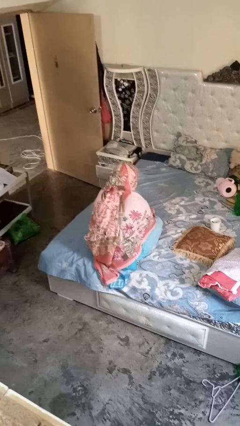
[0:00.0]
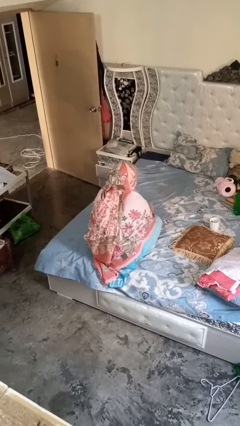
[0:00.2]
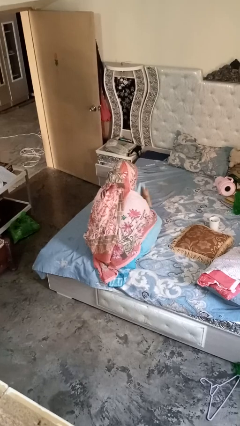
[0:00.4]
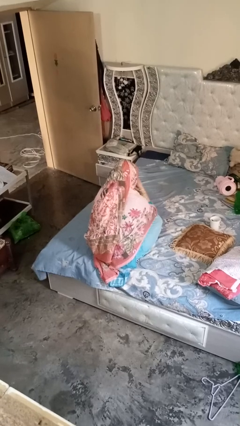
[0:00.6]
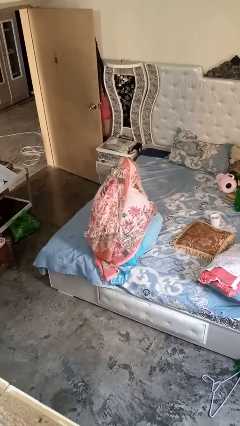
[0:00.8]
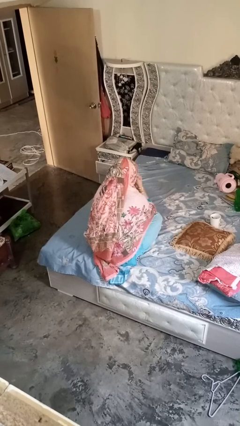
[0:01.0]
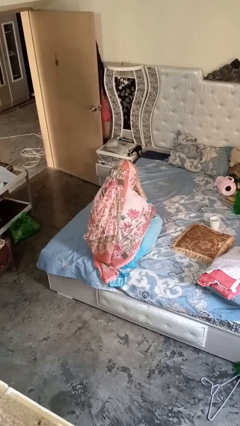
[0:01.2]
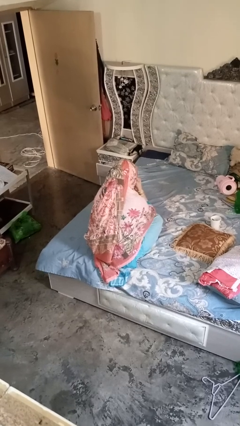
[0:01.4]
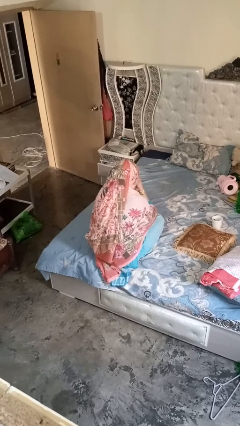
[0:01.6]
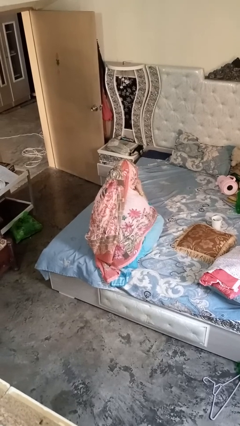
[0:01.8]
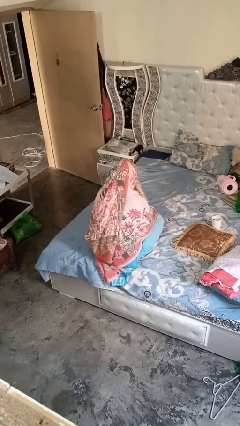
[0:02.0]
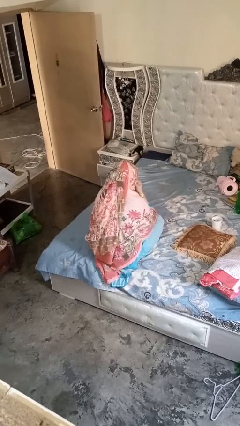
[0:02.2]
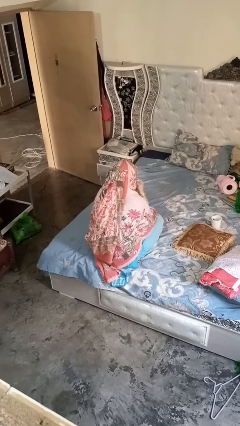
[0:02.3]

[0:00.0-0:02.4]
person blows nose

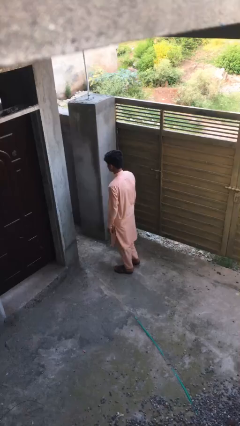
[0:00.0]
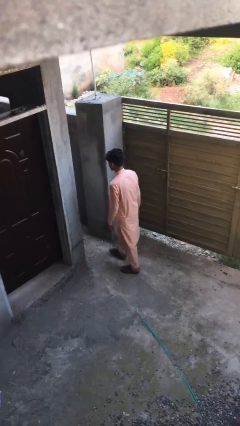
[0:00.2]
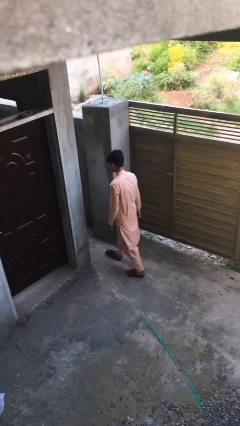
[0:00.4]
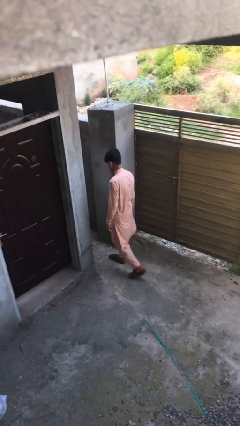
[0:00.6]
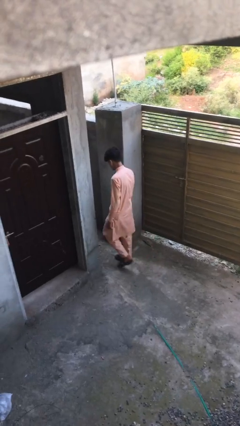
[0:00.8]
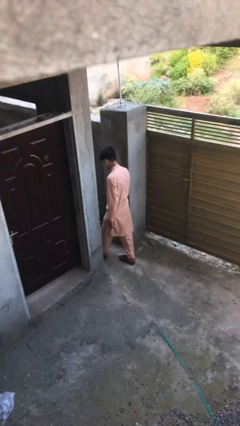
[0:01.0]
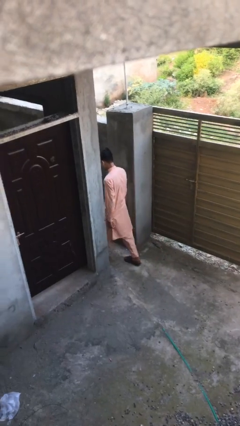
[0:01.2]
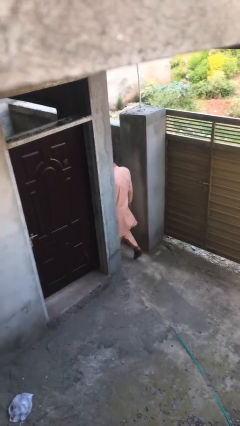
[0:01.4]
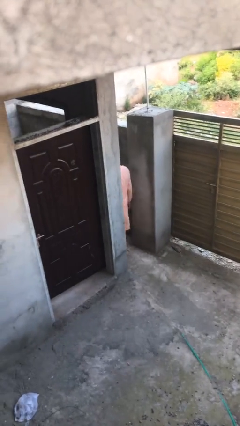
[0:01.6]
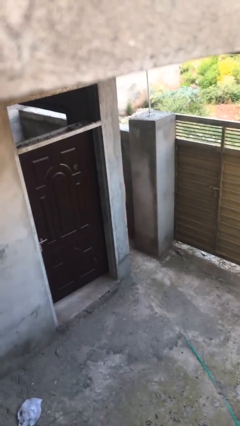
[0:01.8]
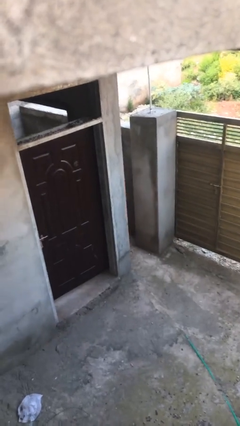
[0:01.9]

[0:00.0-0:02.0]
person exits scene through structure

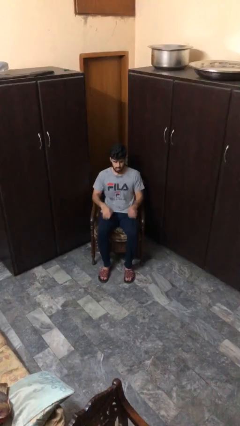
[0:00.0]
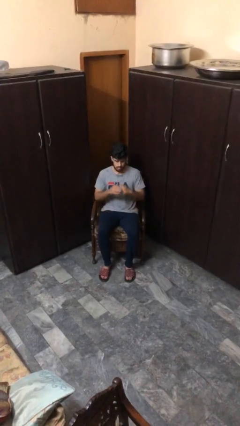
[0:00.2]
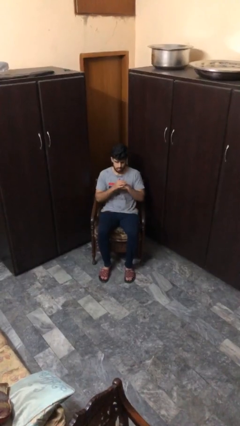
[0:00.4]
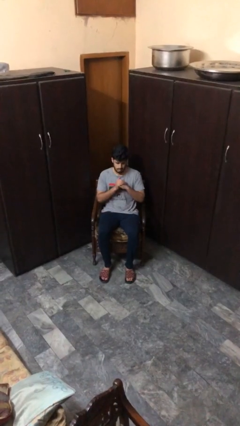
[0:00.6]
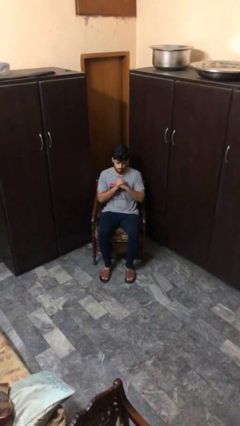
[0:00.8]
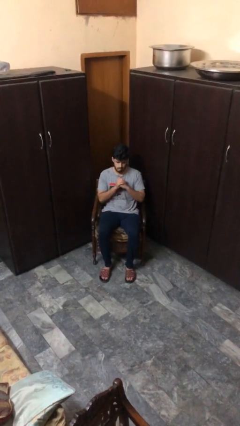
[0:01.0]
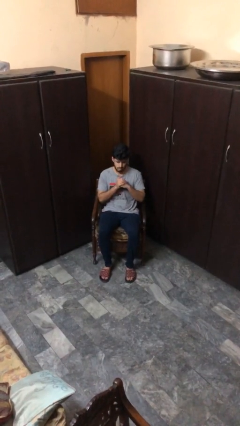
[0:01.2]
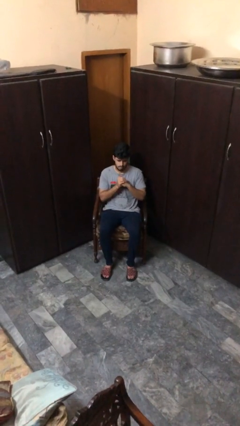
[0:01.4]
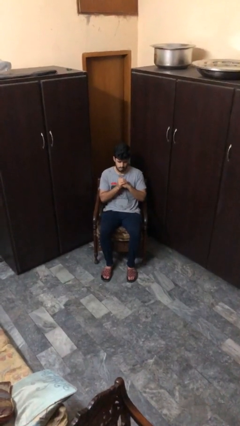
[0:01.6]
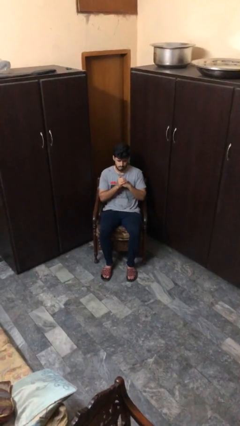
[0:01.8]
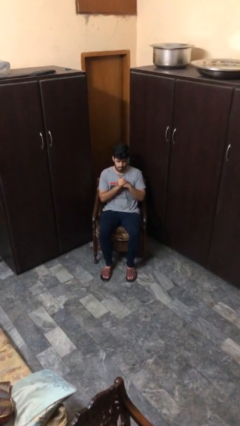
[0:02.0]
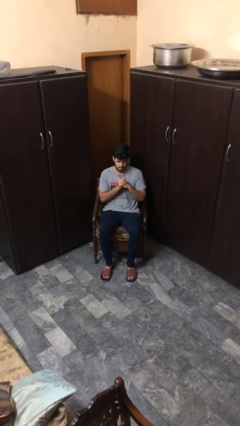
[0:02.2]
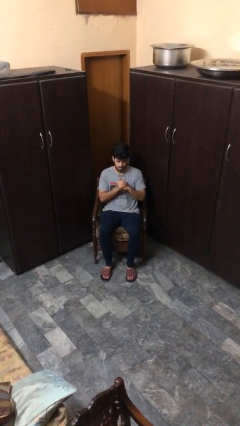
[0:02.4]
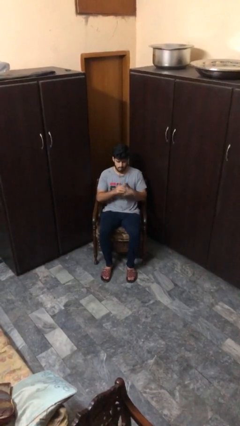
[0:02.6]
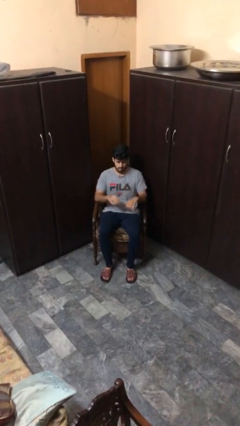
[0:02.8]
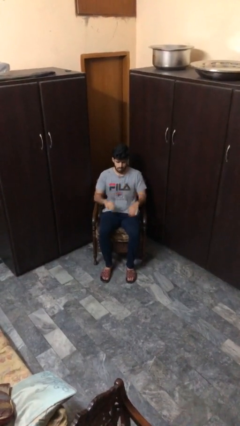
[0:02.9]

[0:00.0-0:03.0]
person cracks knuckles

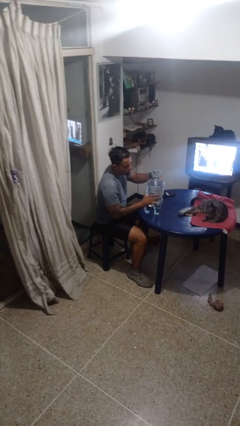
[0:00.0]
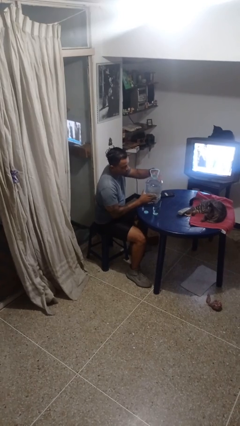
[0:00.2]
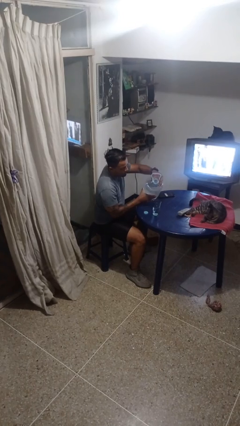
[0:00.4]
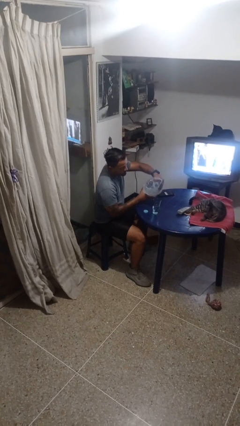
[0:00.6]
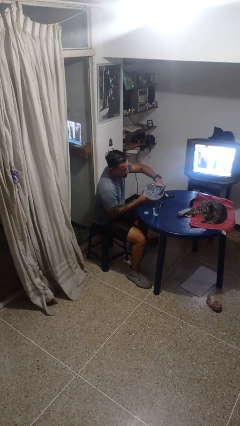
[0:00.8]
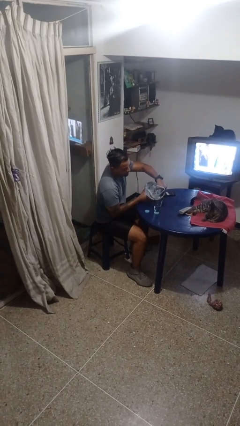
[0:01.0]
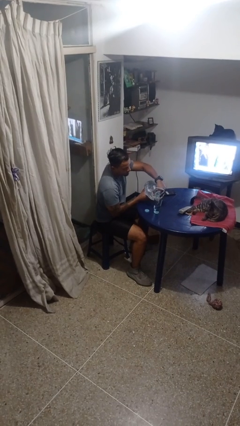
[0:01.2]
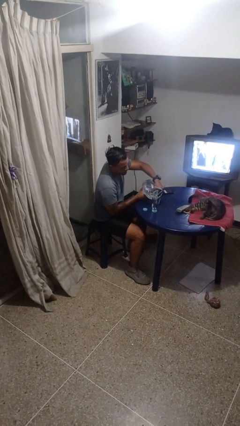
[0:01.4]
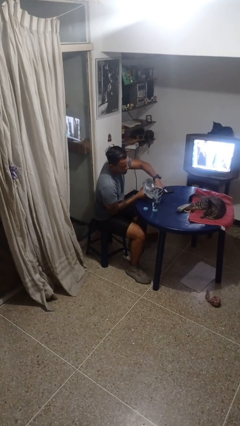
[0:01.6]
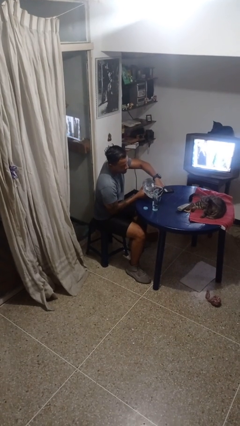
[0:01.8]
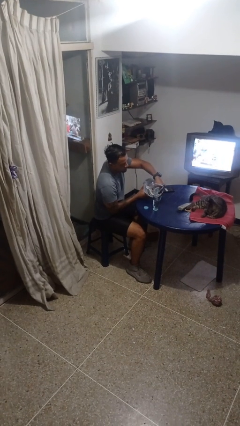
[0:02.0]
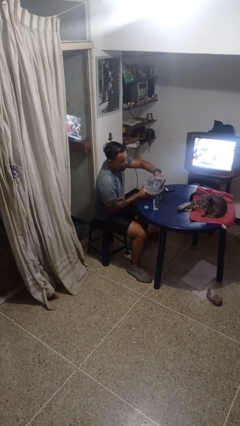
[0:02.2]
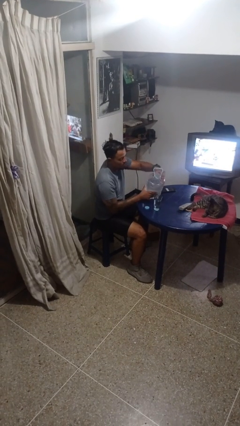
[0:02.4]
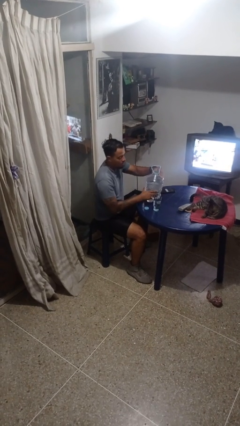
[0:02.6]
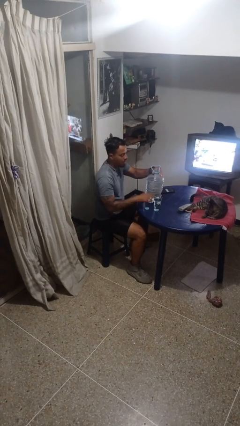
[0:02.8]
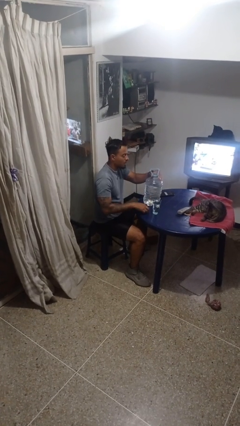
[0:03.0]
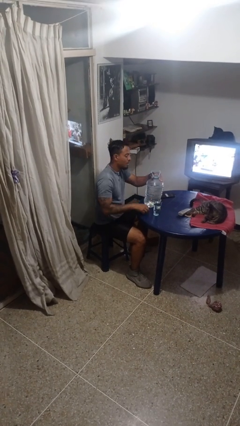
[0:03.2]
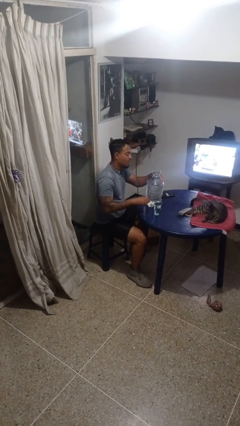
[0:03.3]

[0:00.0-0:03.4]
person pours liquid into cup

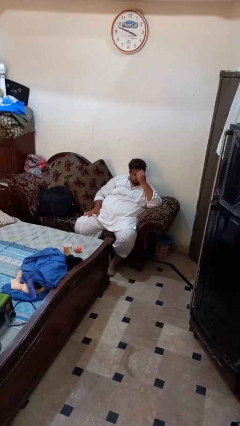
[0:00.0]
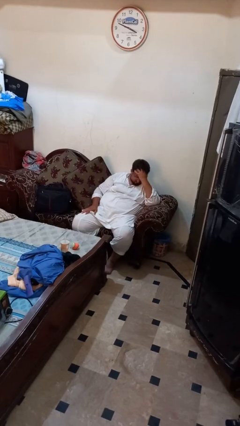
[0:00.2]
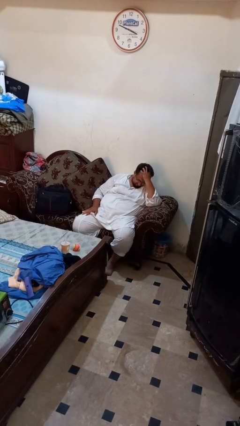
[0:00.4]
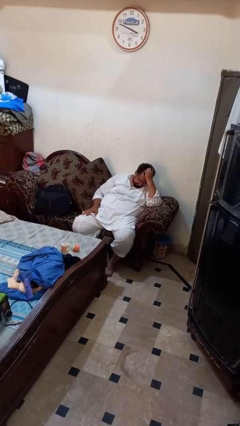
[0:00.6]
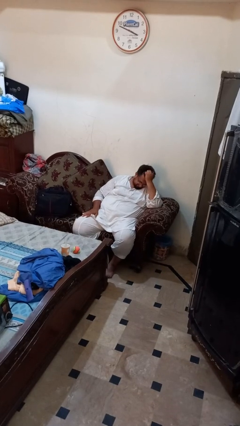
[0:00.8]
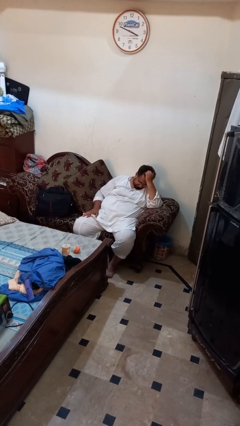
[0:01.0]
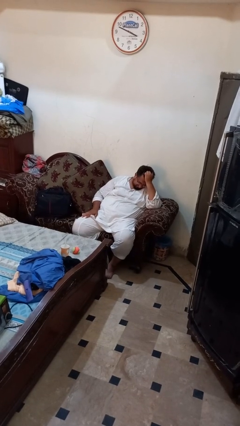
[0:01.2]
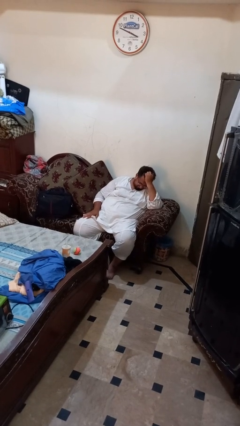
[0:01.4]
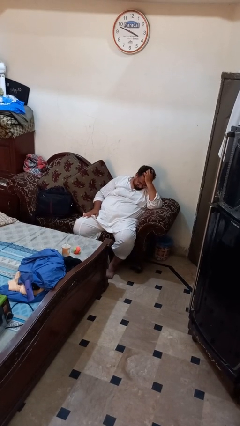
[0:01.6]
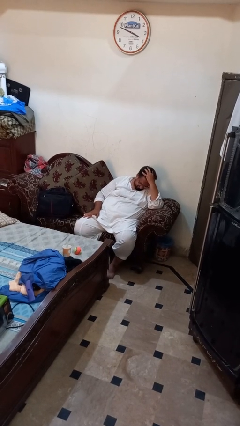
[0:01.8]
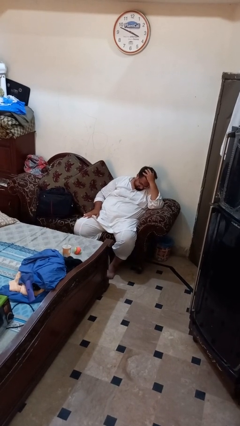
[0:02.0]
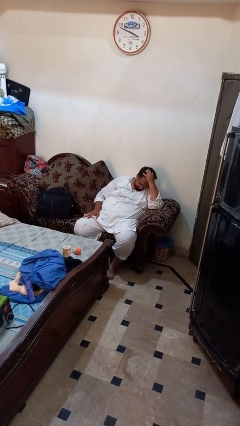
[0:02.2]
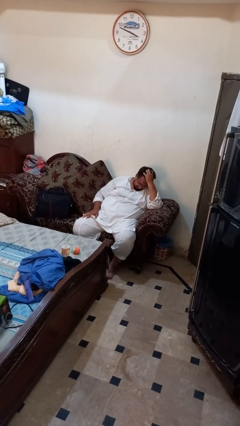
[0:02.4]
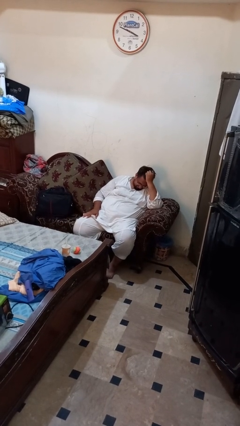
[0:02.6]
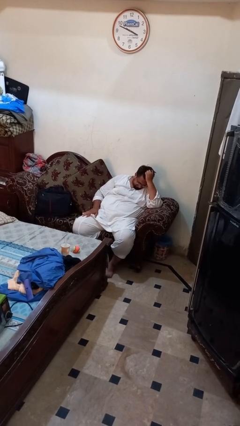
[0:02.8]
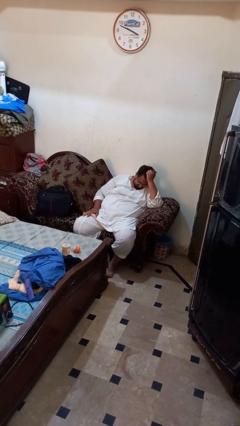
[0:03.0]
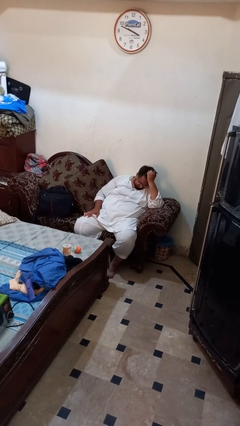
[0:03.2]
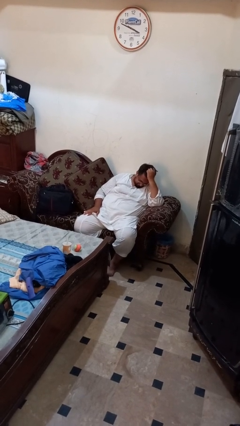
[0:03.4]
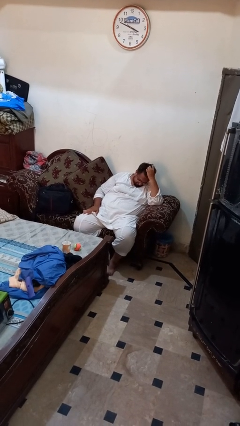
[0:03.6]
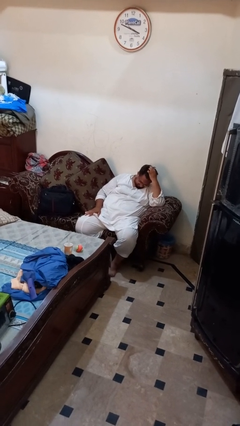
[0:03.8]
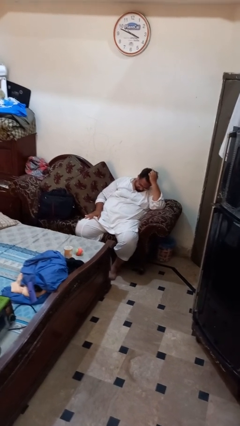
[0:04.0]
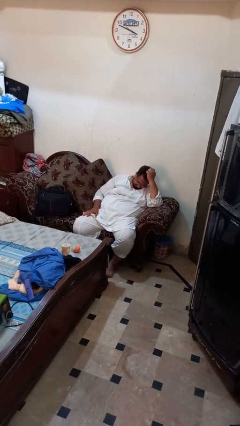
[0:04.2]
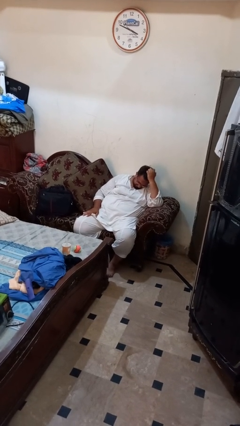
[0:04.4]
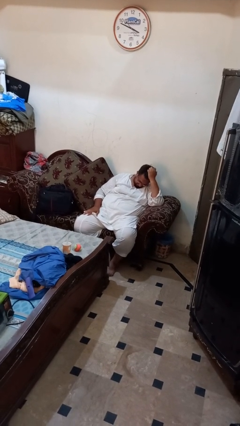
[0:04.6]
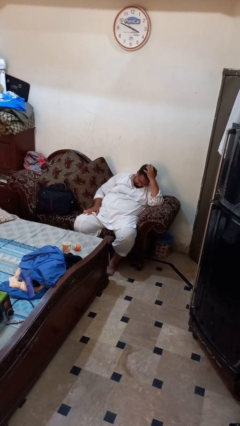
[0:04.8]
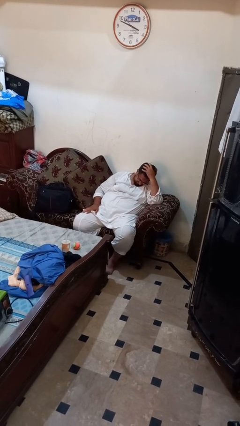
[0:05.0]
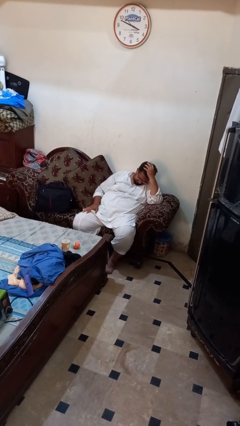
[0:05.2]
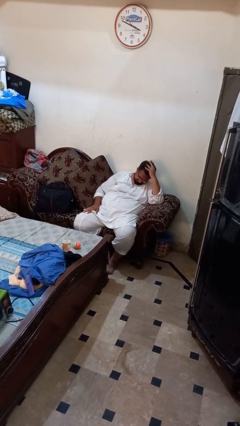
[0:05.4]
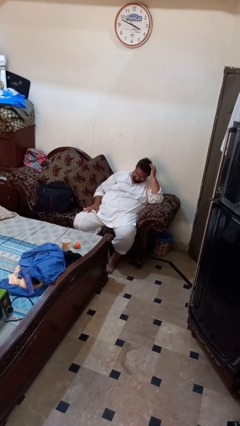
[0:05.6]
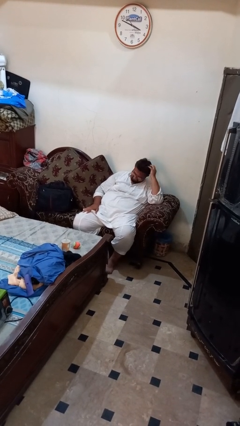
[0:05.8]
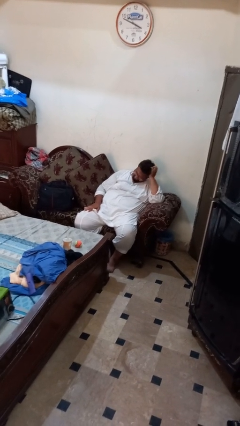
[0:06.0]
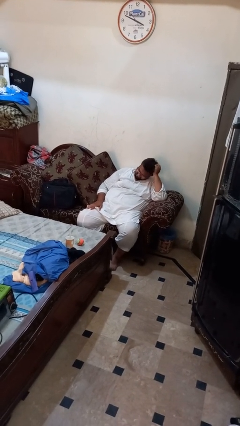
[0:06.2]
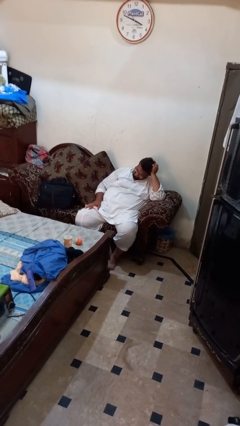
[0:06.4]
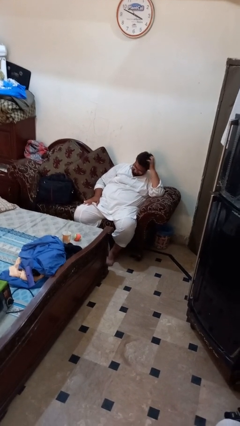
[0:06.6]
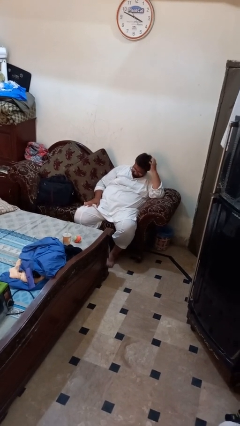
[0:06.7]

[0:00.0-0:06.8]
person strokes hair
